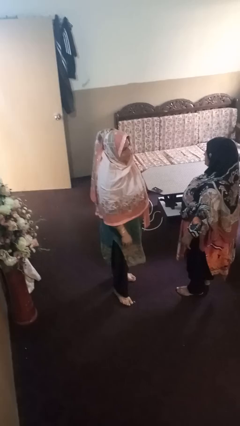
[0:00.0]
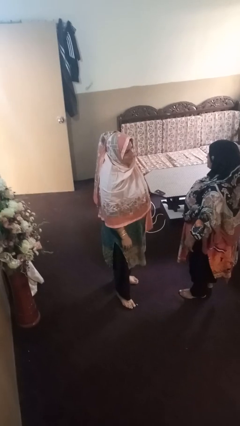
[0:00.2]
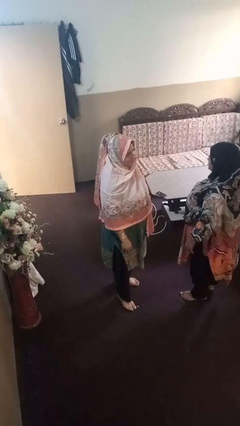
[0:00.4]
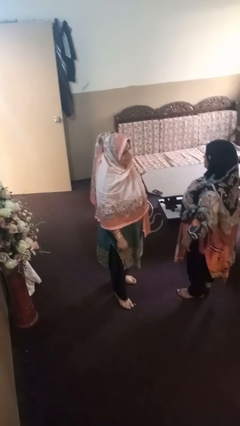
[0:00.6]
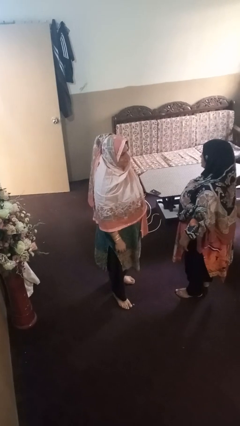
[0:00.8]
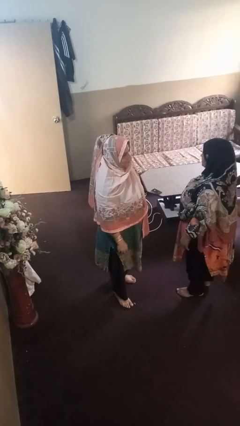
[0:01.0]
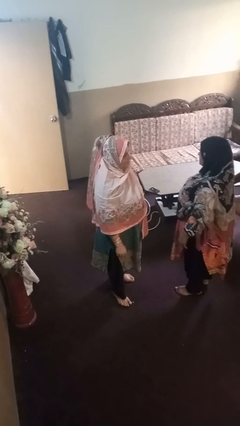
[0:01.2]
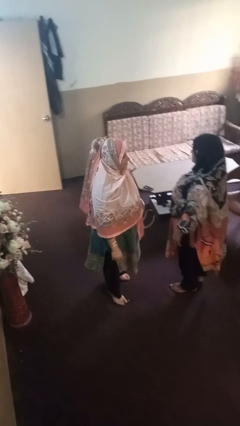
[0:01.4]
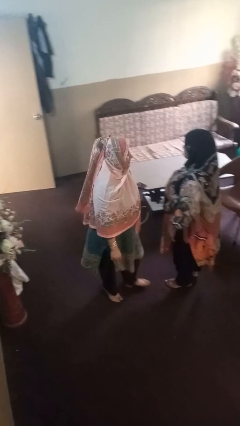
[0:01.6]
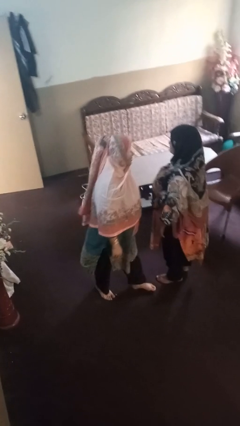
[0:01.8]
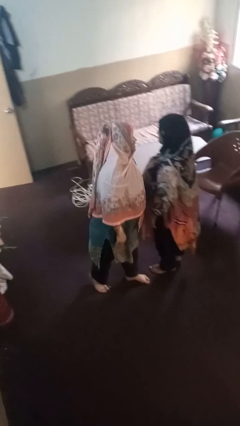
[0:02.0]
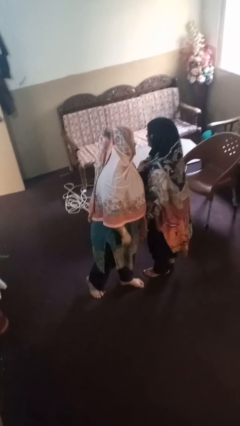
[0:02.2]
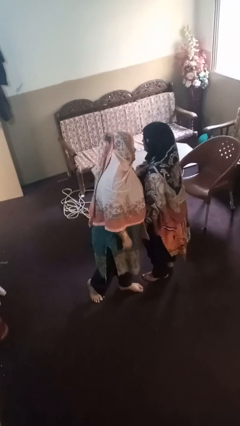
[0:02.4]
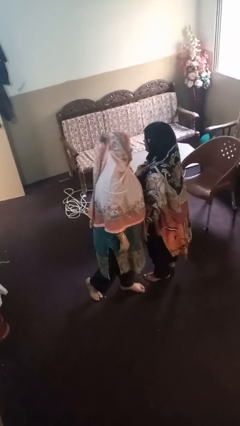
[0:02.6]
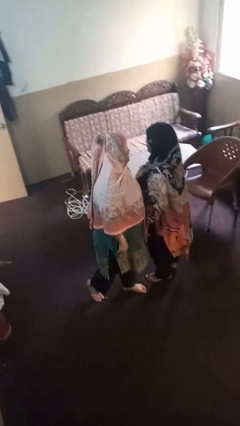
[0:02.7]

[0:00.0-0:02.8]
person laughs with person

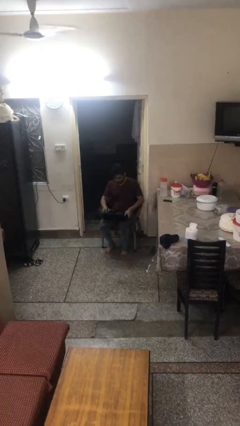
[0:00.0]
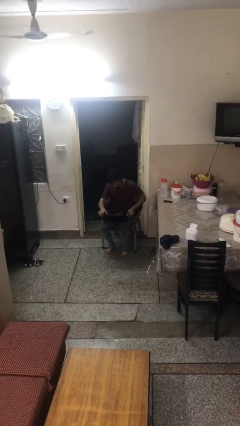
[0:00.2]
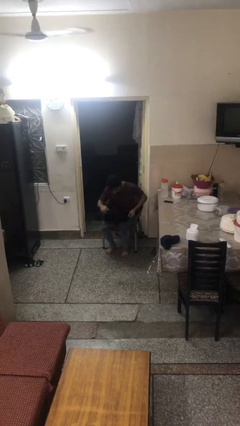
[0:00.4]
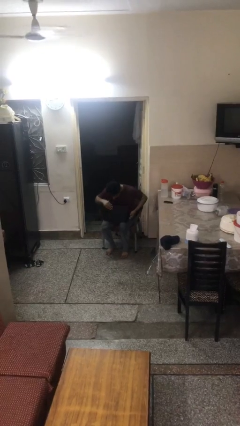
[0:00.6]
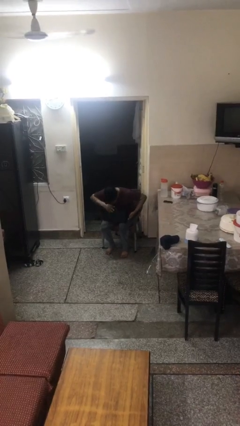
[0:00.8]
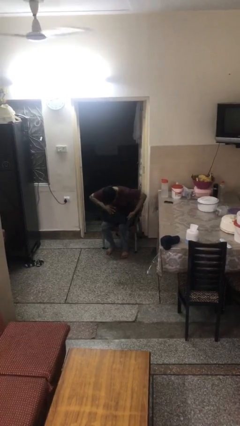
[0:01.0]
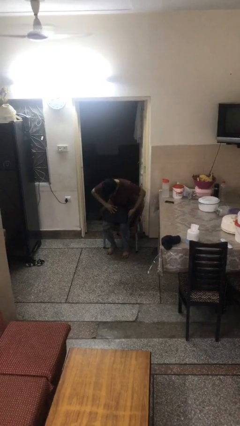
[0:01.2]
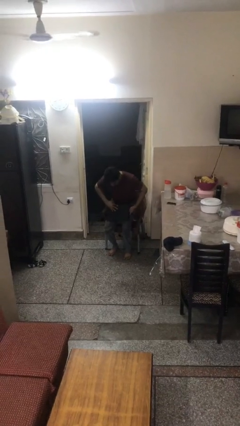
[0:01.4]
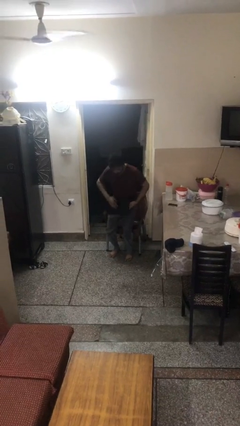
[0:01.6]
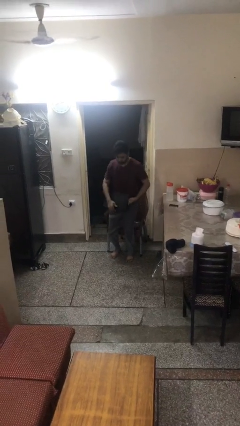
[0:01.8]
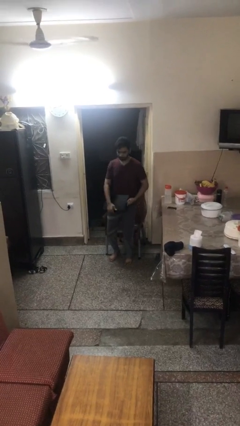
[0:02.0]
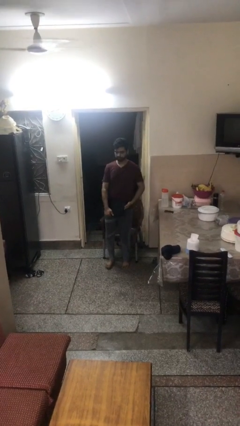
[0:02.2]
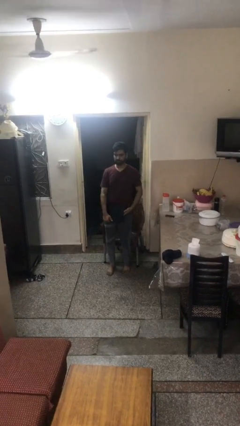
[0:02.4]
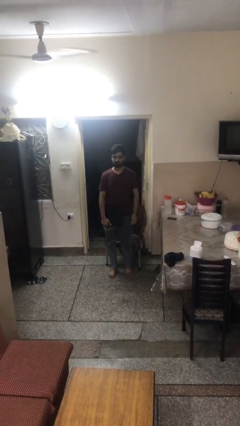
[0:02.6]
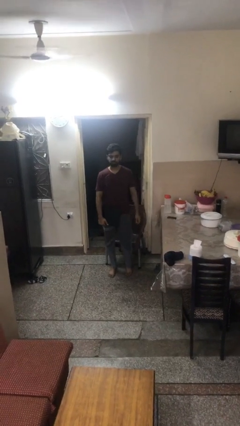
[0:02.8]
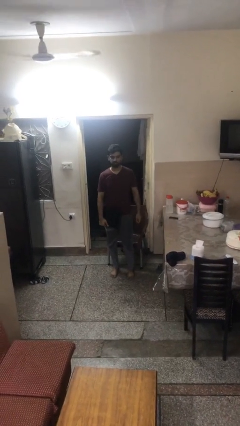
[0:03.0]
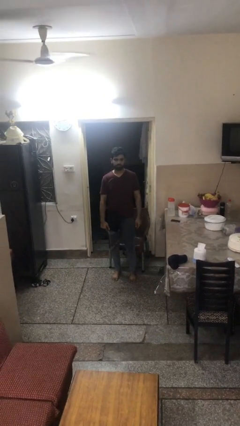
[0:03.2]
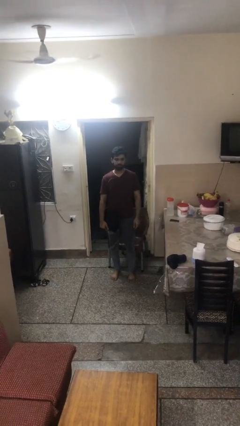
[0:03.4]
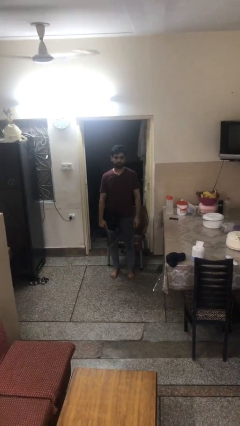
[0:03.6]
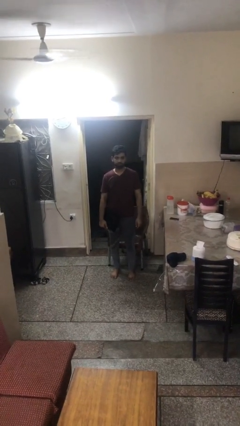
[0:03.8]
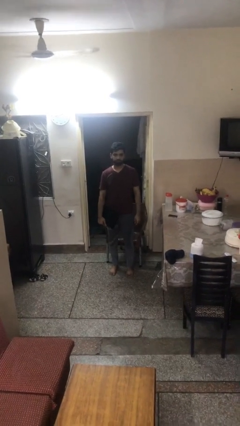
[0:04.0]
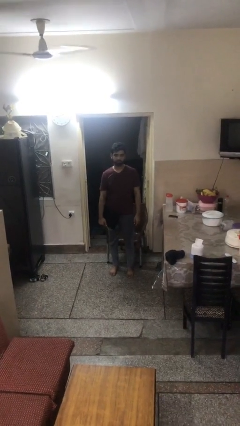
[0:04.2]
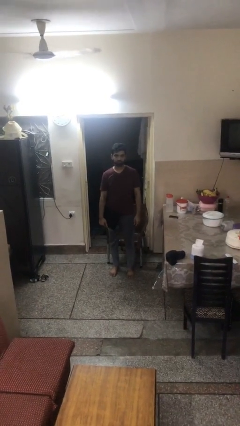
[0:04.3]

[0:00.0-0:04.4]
person stands up

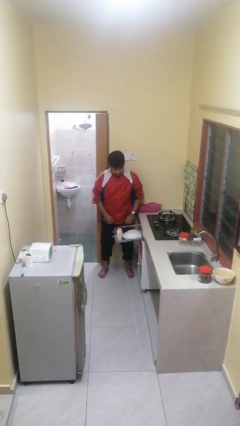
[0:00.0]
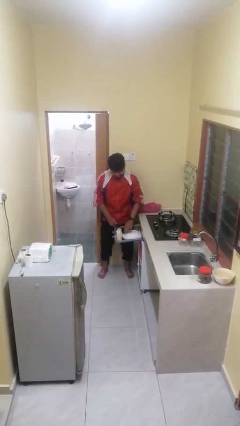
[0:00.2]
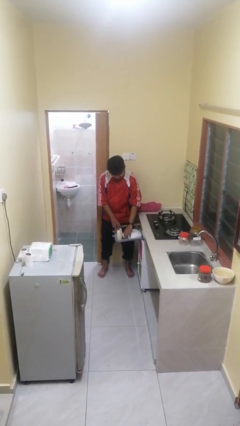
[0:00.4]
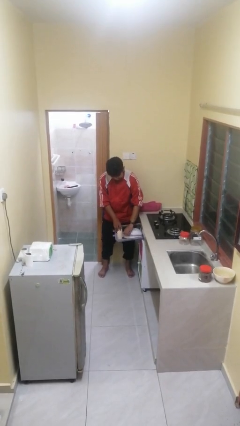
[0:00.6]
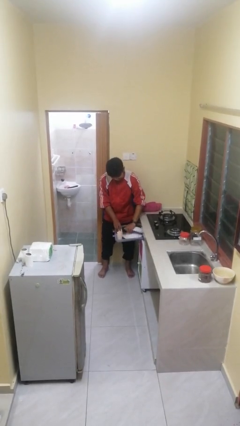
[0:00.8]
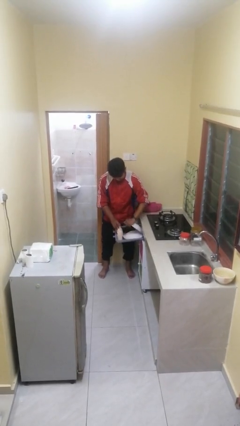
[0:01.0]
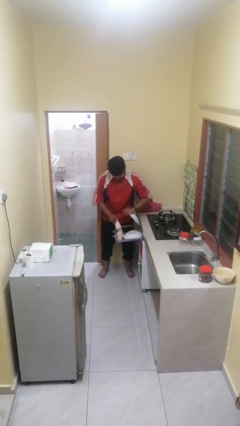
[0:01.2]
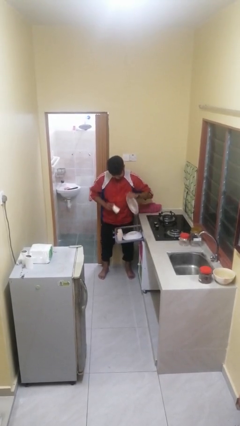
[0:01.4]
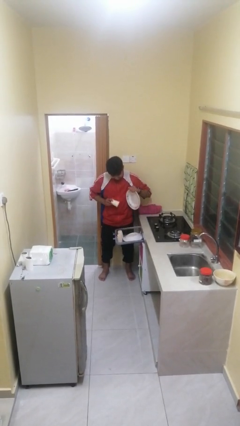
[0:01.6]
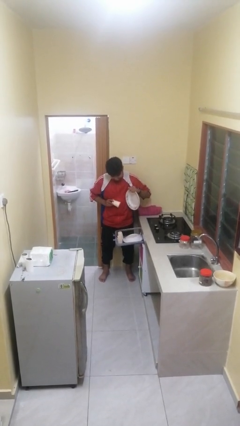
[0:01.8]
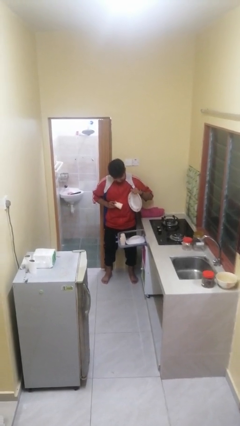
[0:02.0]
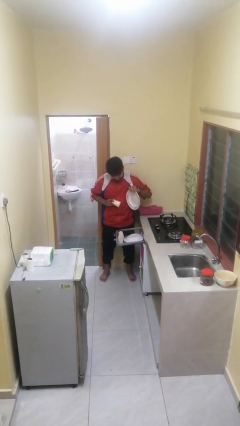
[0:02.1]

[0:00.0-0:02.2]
person takes object from kitchen drawer

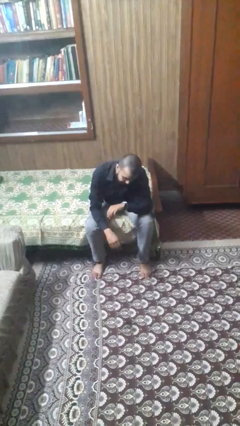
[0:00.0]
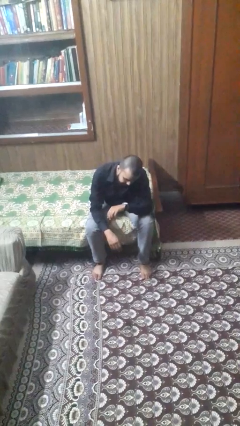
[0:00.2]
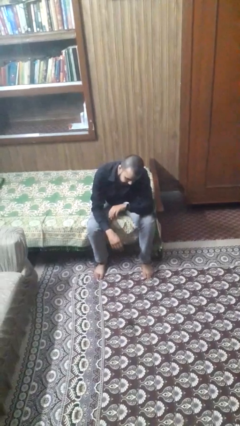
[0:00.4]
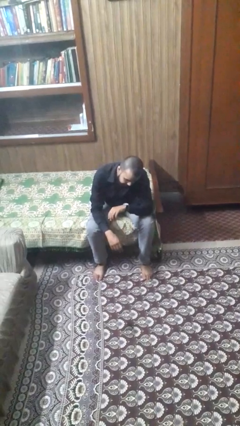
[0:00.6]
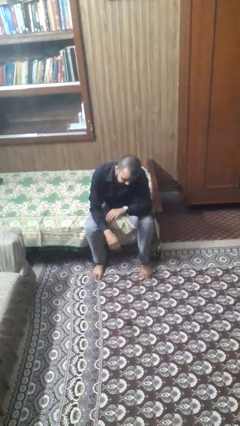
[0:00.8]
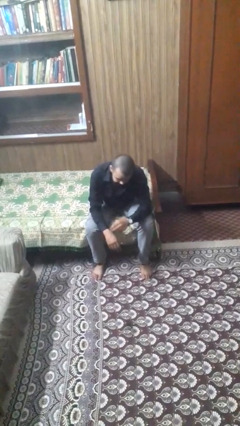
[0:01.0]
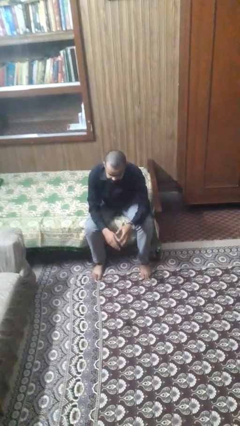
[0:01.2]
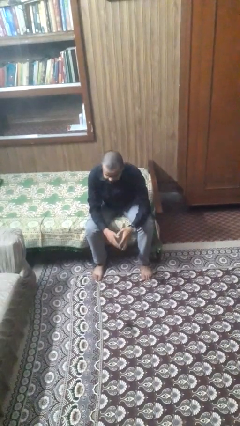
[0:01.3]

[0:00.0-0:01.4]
person looks at hands in lap

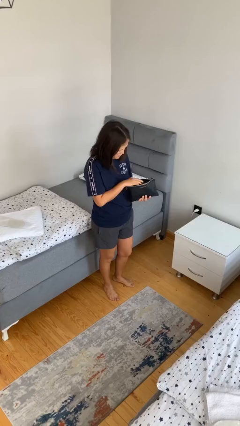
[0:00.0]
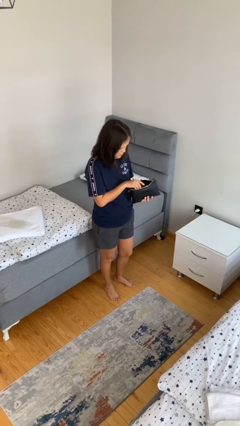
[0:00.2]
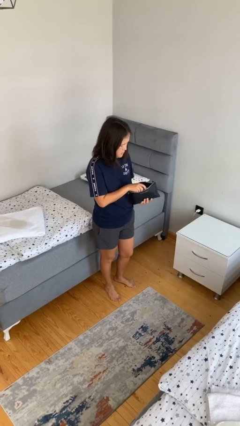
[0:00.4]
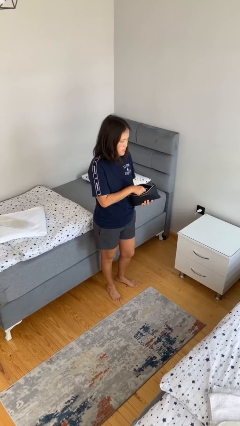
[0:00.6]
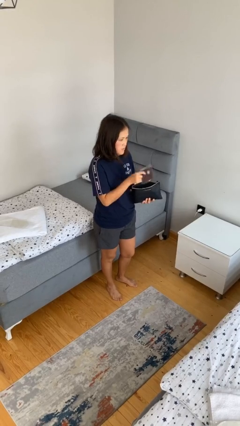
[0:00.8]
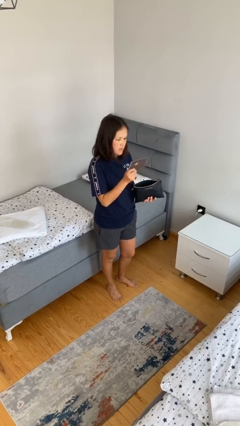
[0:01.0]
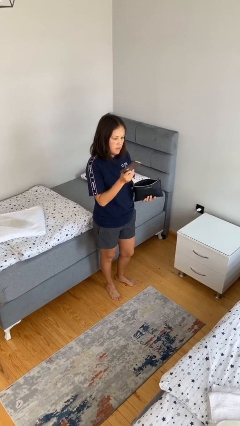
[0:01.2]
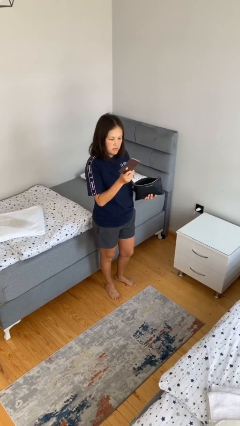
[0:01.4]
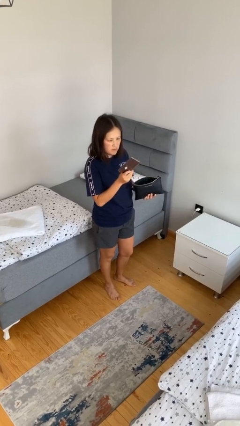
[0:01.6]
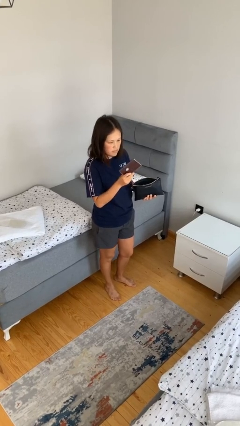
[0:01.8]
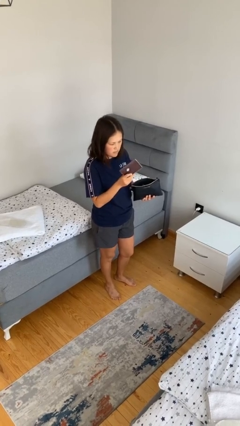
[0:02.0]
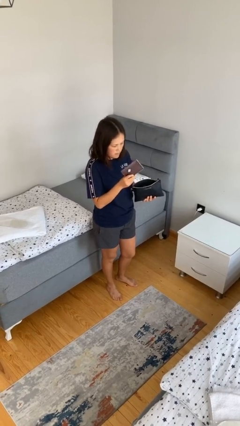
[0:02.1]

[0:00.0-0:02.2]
person takes object from purse

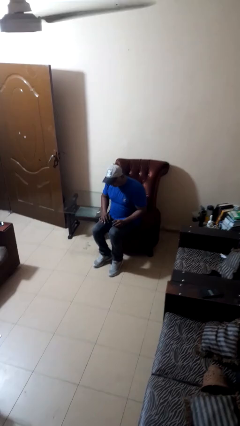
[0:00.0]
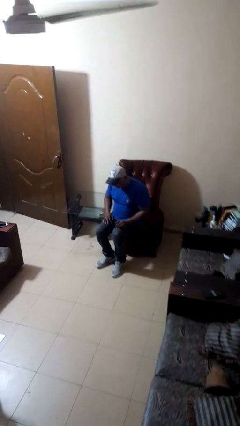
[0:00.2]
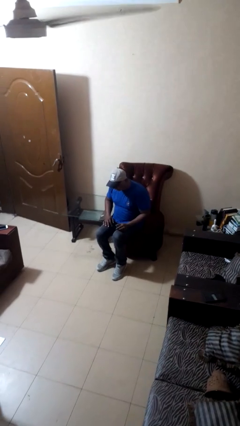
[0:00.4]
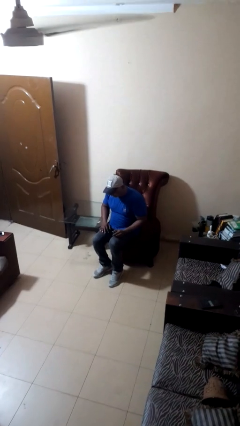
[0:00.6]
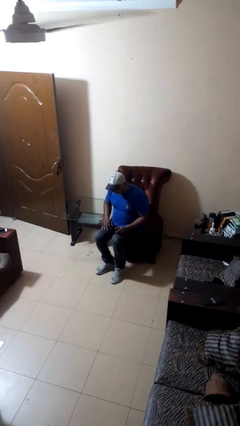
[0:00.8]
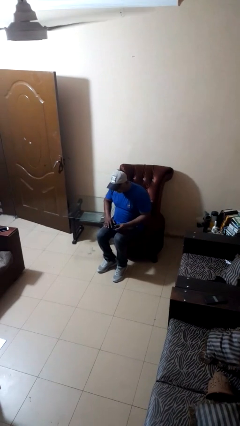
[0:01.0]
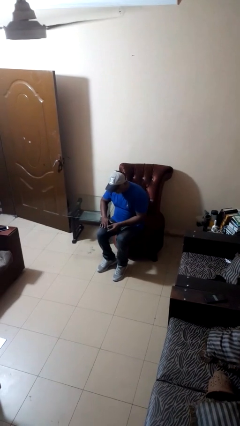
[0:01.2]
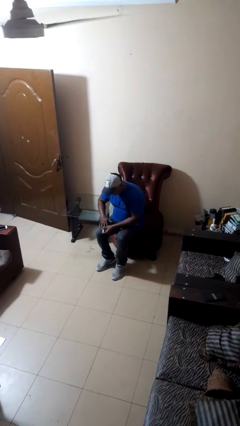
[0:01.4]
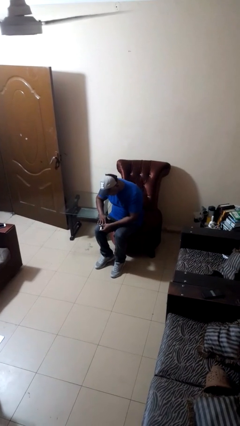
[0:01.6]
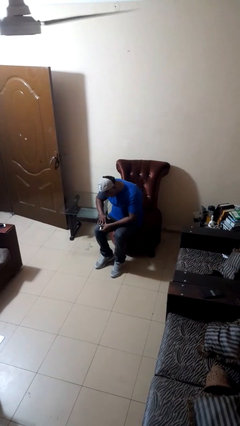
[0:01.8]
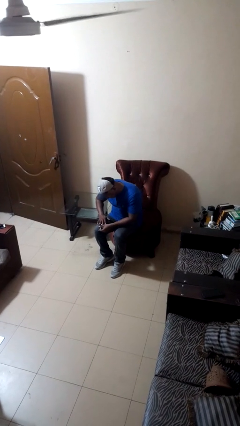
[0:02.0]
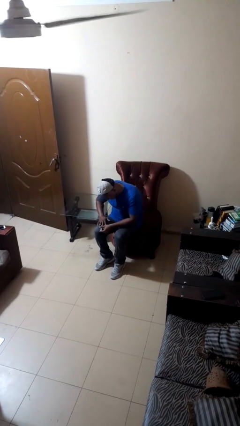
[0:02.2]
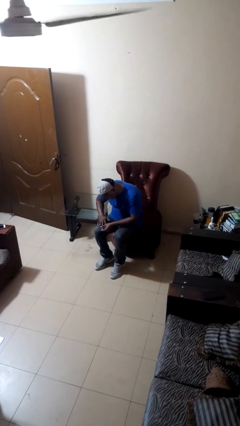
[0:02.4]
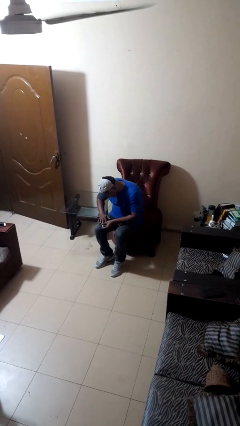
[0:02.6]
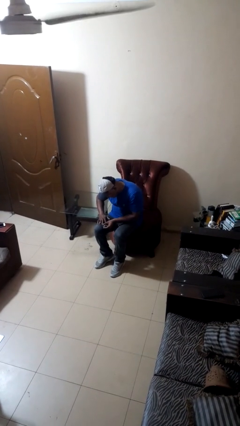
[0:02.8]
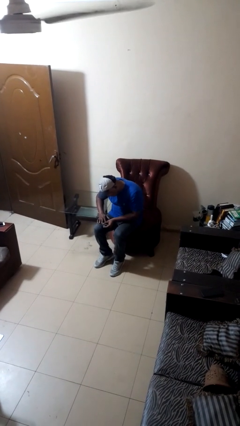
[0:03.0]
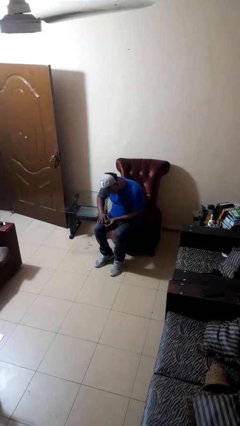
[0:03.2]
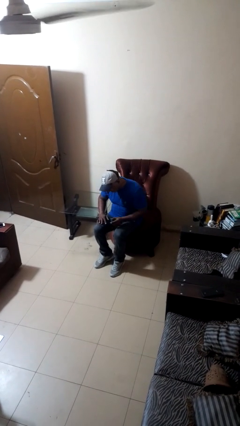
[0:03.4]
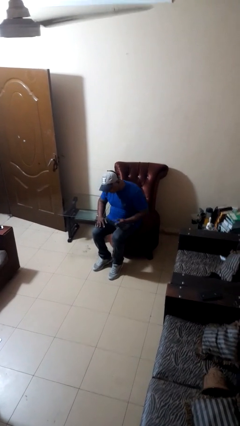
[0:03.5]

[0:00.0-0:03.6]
person clips fingernails

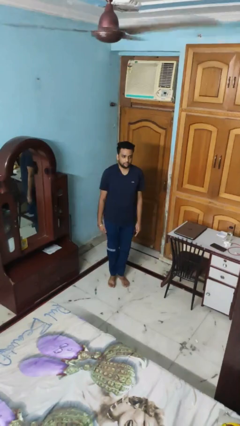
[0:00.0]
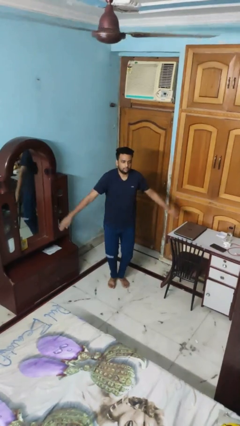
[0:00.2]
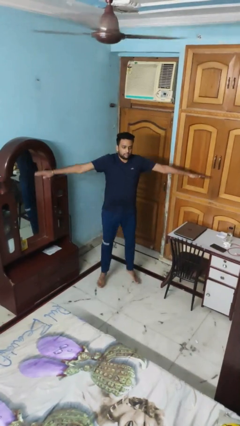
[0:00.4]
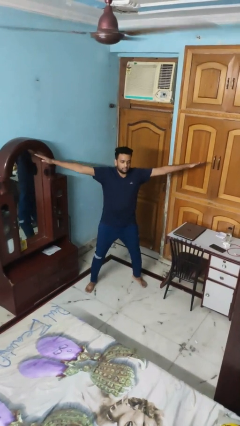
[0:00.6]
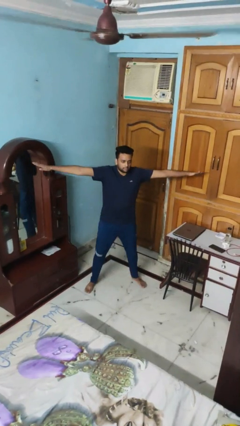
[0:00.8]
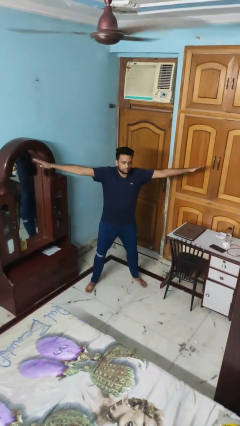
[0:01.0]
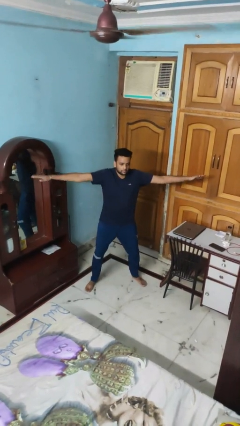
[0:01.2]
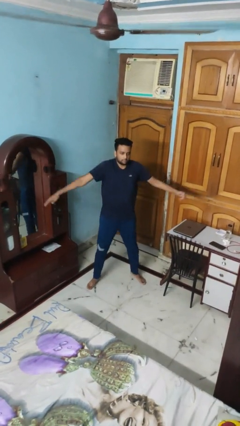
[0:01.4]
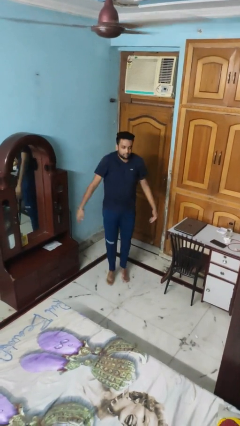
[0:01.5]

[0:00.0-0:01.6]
person exercises with jumping jacks
